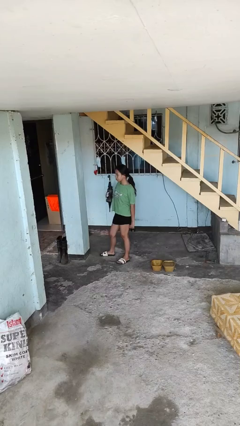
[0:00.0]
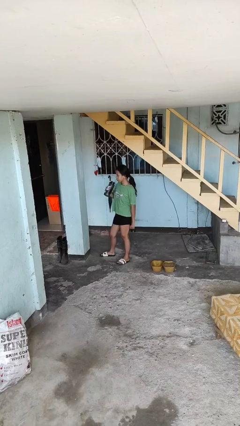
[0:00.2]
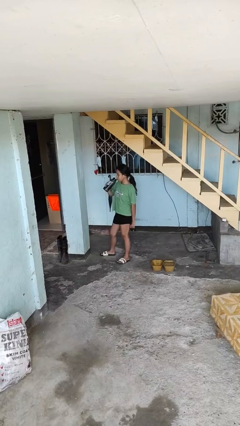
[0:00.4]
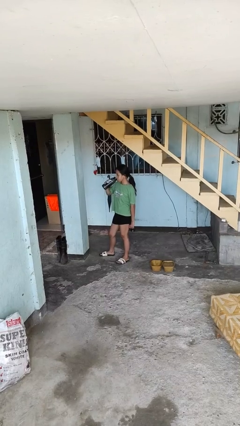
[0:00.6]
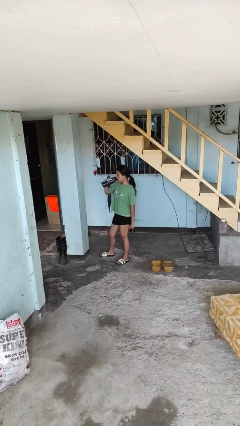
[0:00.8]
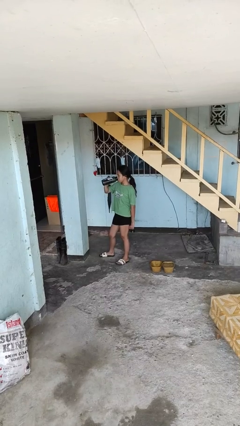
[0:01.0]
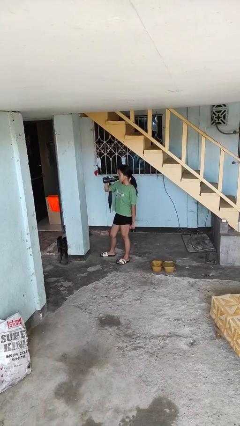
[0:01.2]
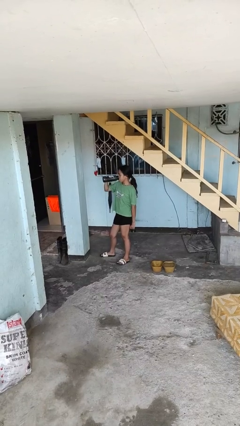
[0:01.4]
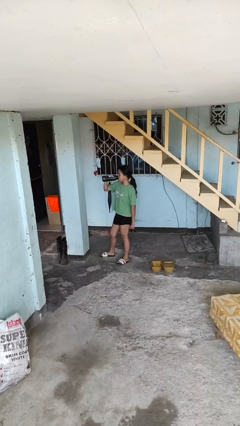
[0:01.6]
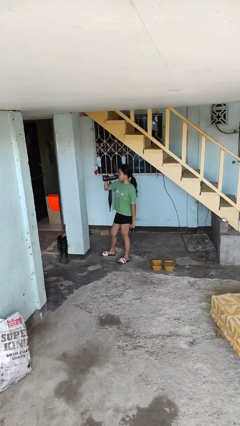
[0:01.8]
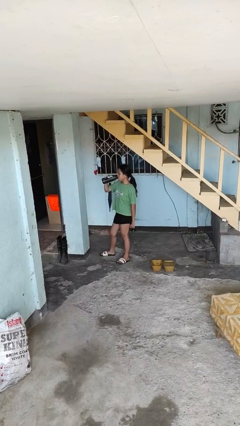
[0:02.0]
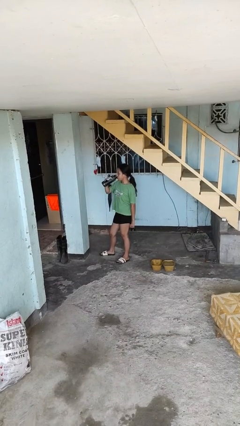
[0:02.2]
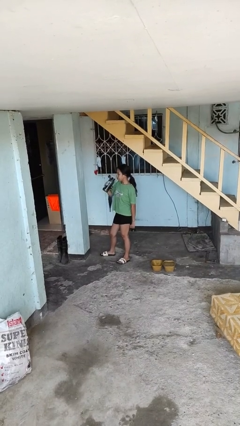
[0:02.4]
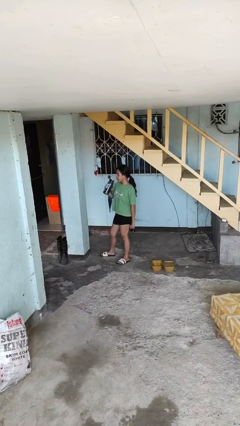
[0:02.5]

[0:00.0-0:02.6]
person drinks from bottle

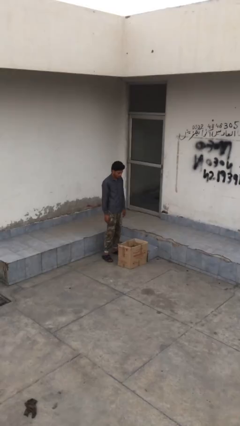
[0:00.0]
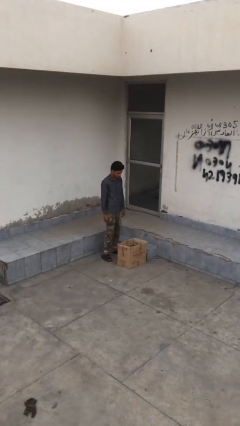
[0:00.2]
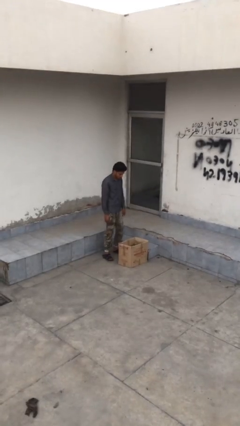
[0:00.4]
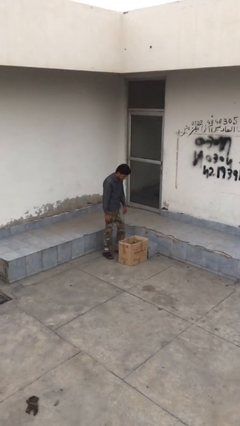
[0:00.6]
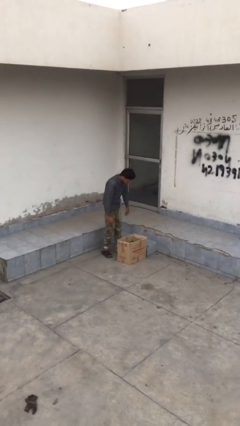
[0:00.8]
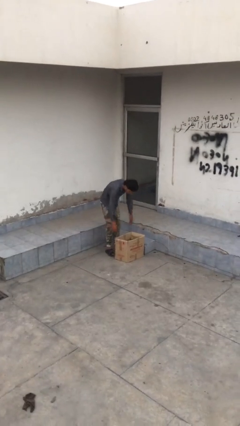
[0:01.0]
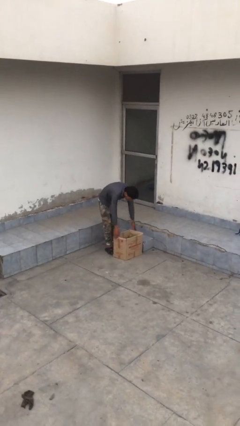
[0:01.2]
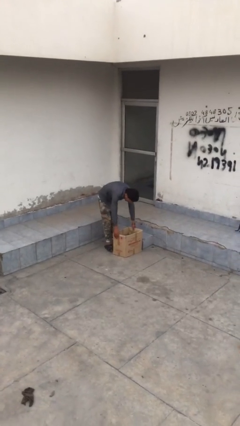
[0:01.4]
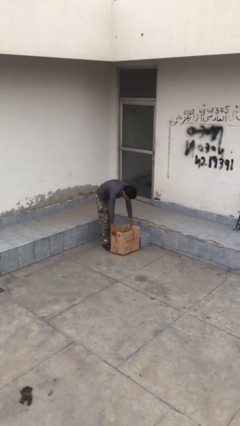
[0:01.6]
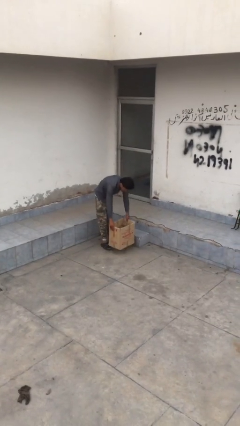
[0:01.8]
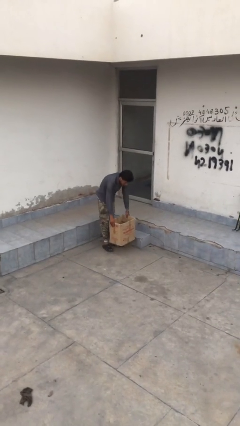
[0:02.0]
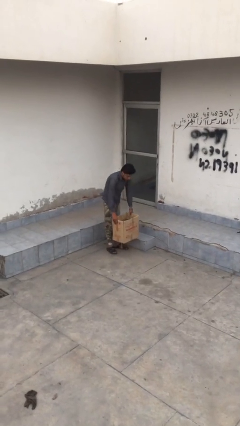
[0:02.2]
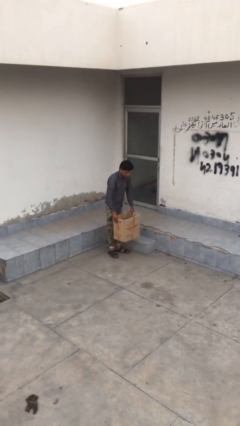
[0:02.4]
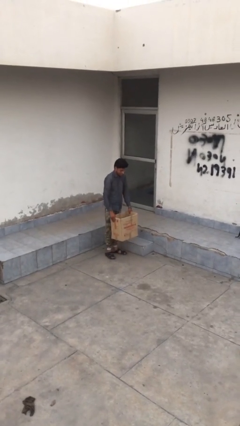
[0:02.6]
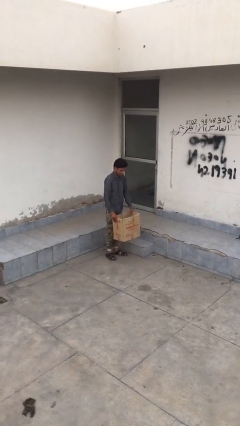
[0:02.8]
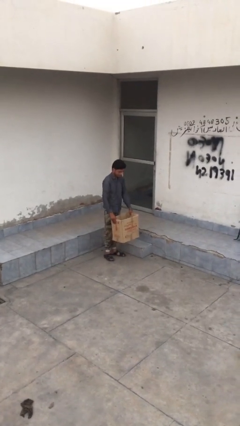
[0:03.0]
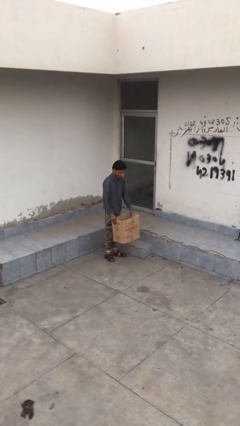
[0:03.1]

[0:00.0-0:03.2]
person picks up object from floor

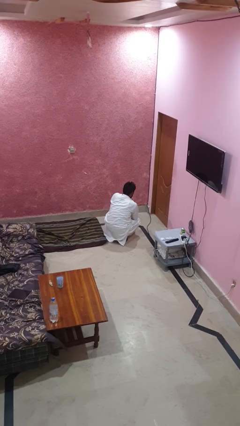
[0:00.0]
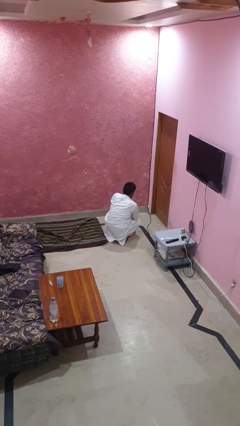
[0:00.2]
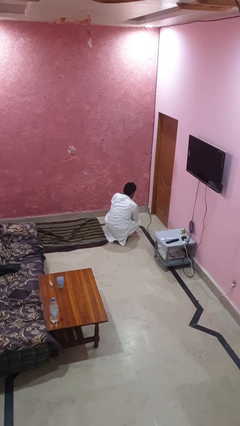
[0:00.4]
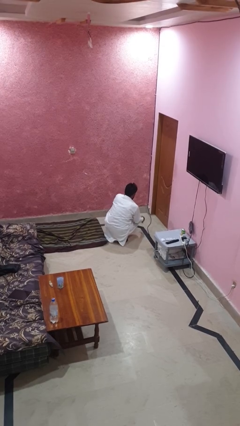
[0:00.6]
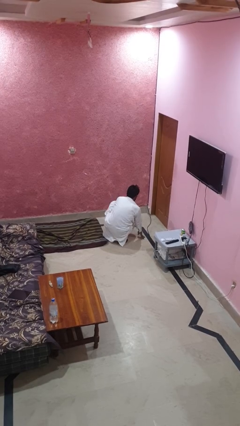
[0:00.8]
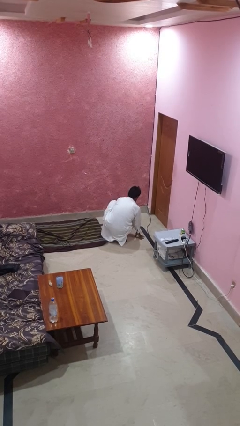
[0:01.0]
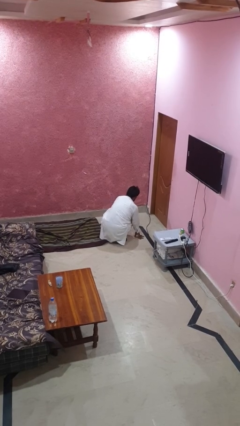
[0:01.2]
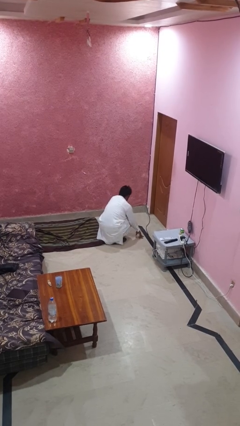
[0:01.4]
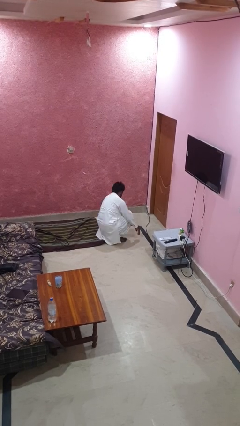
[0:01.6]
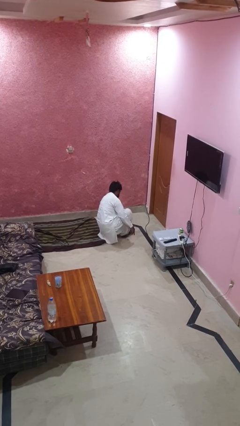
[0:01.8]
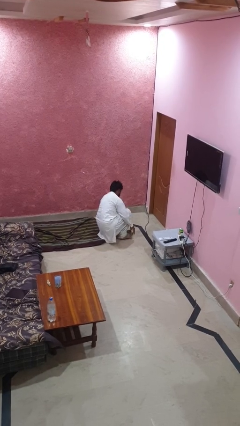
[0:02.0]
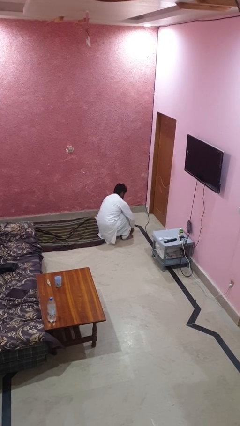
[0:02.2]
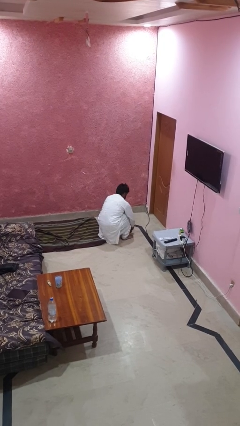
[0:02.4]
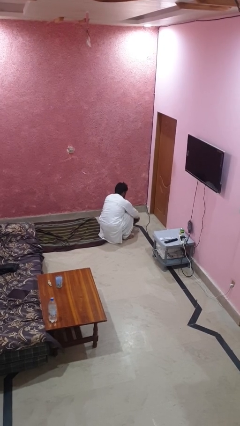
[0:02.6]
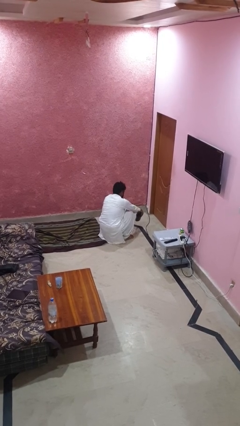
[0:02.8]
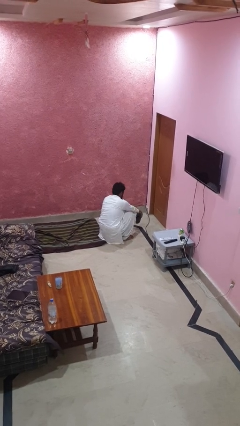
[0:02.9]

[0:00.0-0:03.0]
person takes off shoes

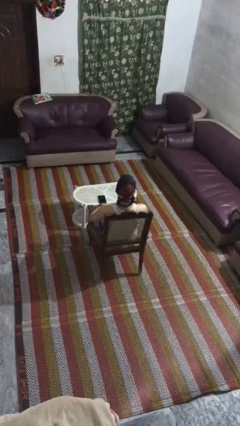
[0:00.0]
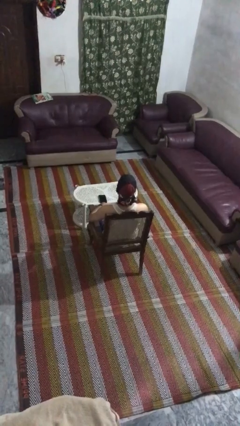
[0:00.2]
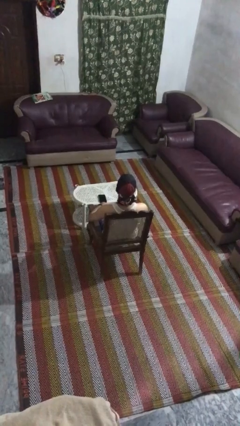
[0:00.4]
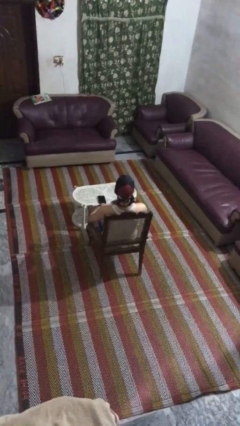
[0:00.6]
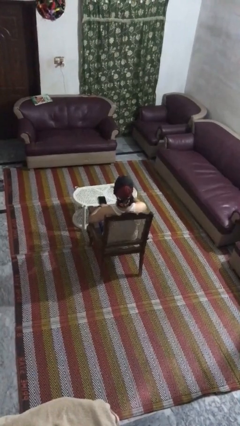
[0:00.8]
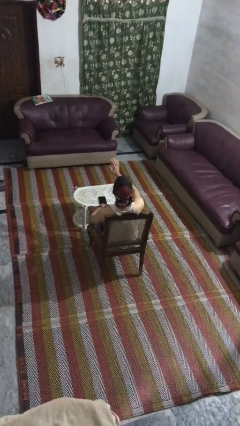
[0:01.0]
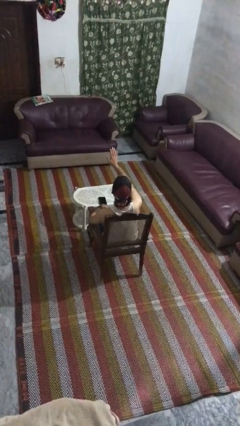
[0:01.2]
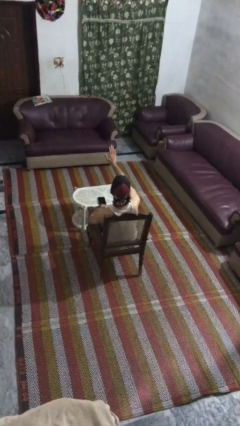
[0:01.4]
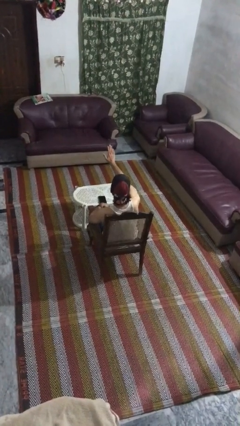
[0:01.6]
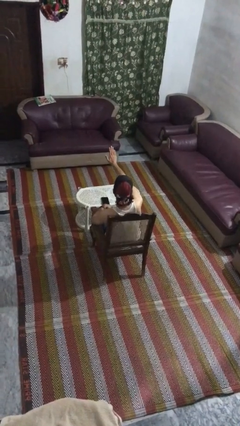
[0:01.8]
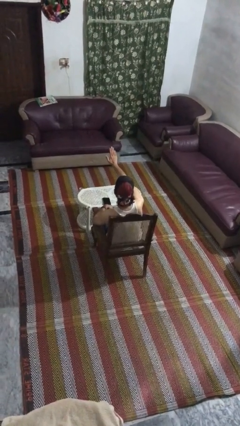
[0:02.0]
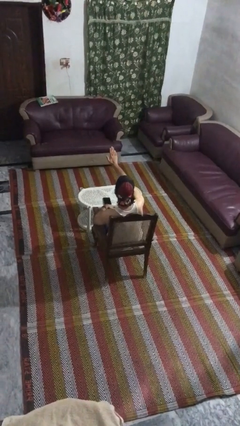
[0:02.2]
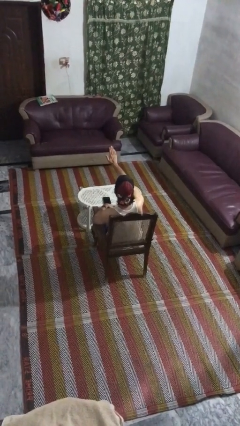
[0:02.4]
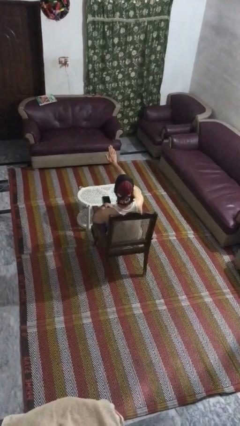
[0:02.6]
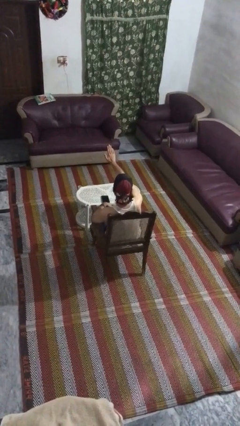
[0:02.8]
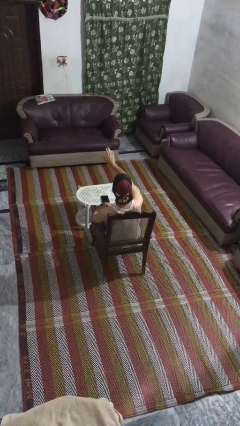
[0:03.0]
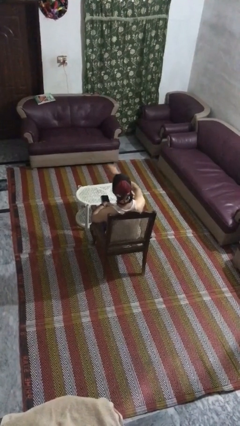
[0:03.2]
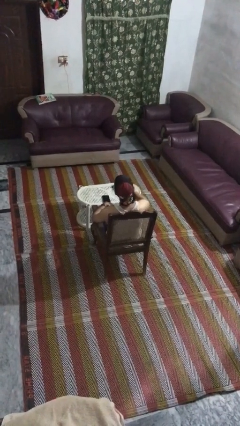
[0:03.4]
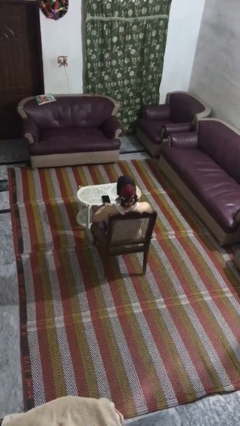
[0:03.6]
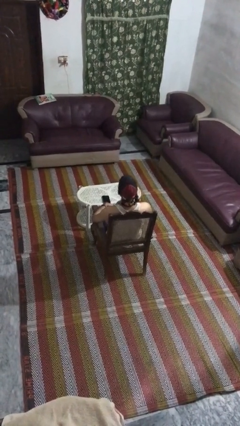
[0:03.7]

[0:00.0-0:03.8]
person gestures stop

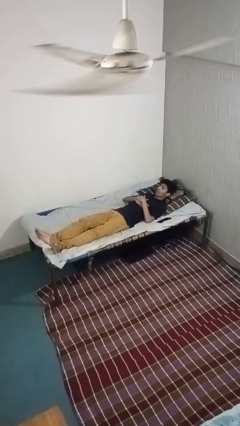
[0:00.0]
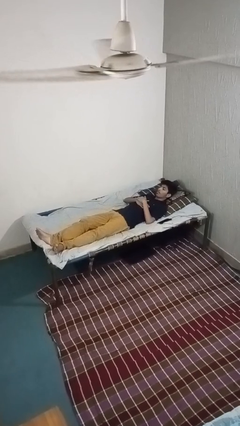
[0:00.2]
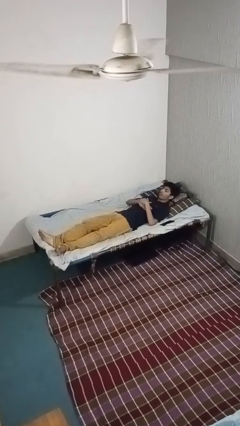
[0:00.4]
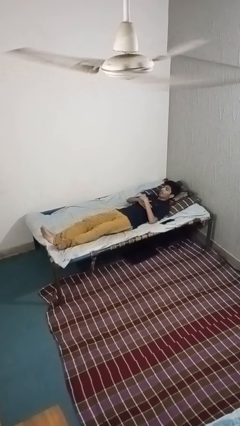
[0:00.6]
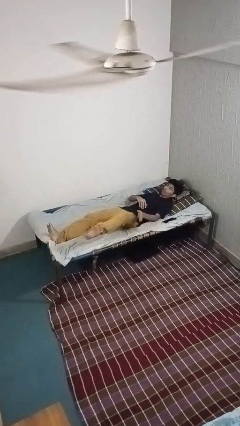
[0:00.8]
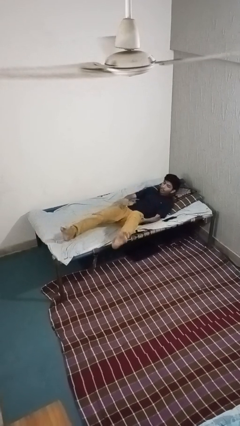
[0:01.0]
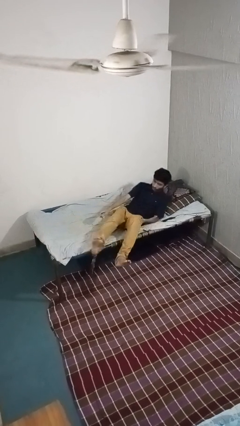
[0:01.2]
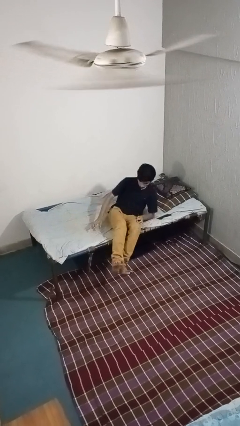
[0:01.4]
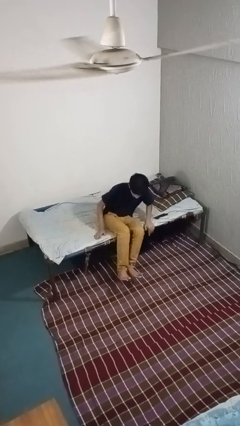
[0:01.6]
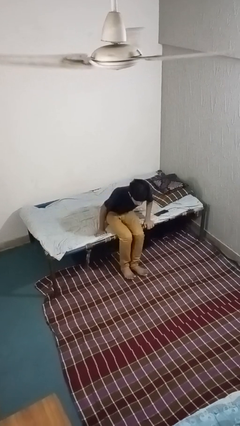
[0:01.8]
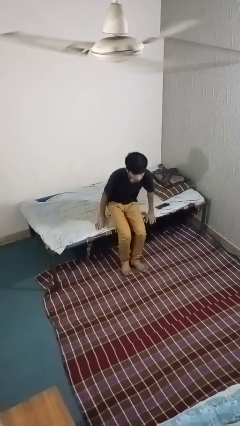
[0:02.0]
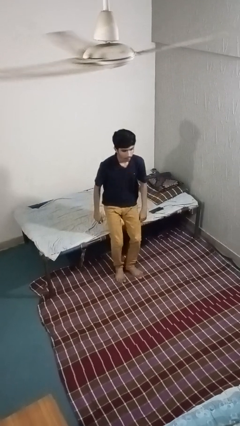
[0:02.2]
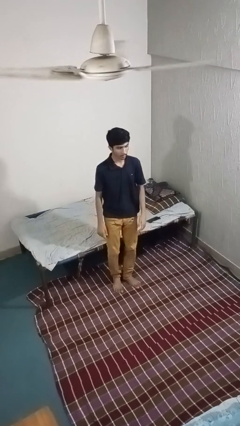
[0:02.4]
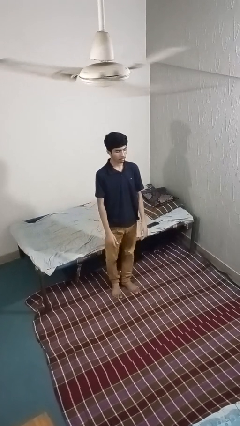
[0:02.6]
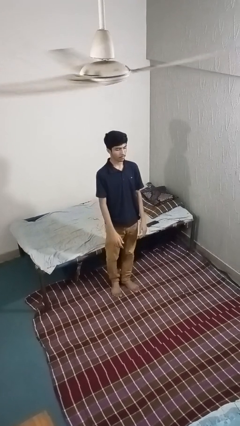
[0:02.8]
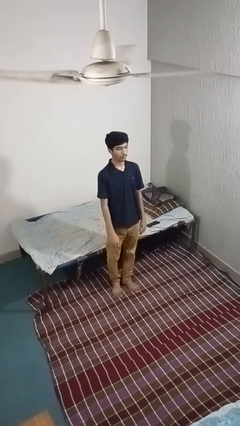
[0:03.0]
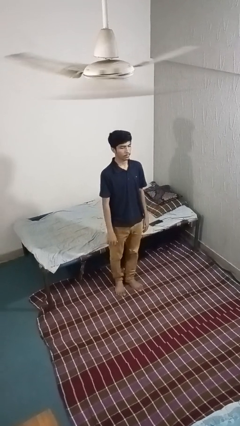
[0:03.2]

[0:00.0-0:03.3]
person stands up

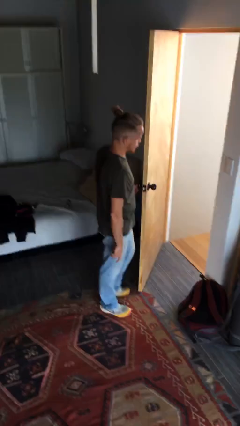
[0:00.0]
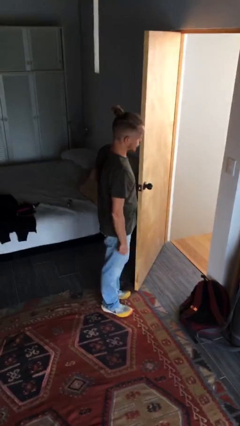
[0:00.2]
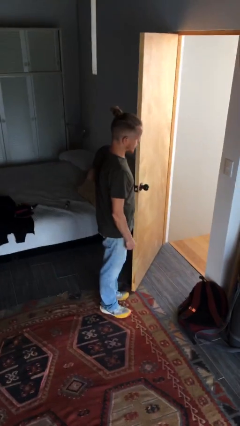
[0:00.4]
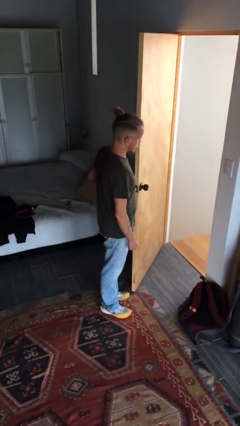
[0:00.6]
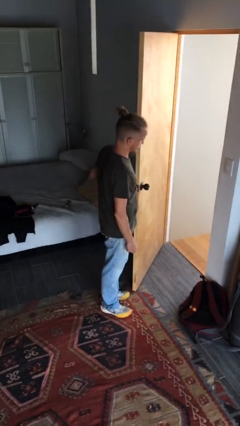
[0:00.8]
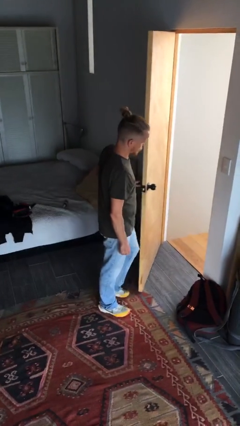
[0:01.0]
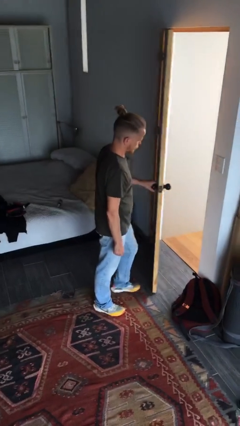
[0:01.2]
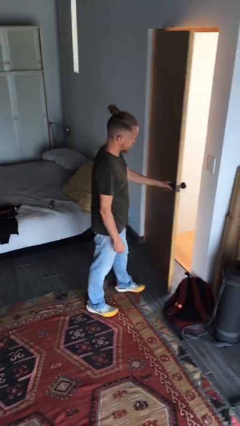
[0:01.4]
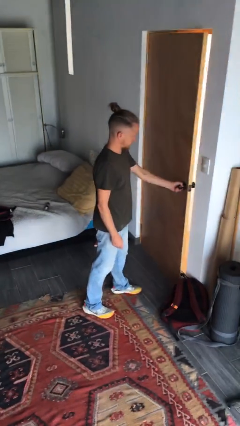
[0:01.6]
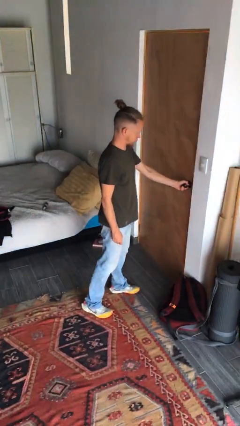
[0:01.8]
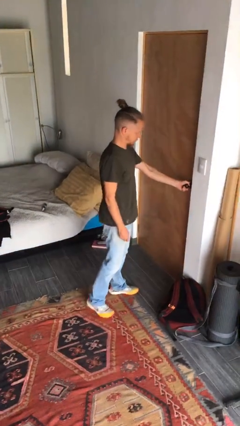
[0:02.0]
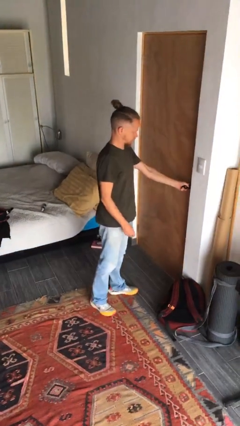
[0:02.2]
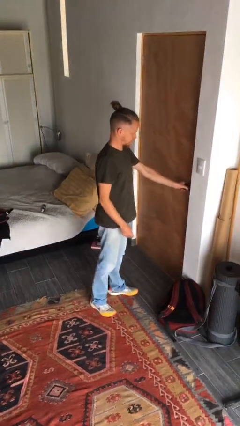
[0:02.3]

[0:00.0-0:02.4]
person closes facility door
